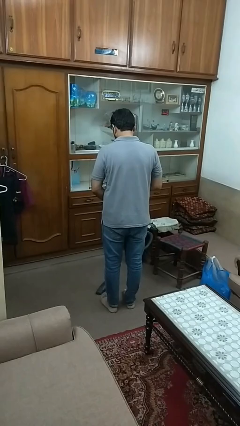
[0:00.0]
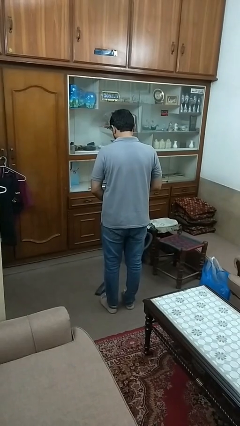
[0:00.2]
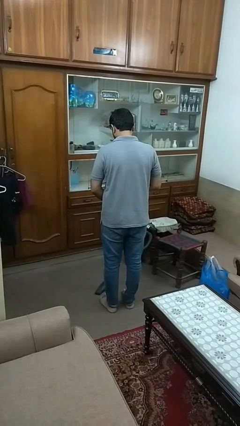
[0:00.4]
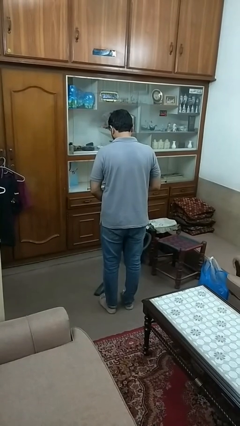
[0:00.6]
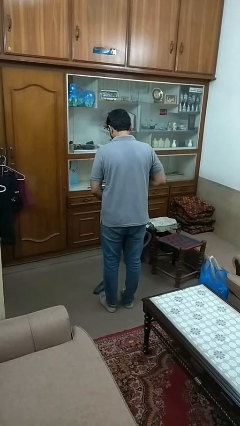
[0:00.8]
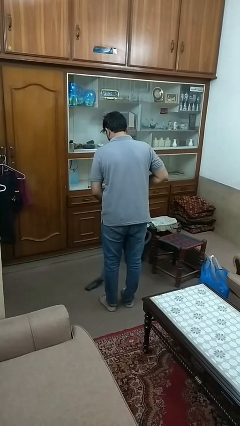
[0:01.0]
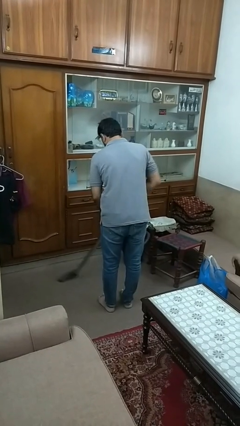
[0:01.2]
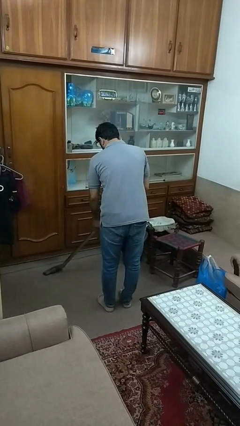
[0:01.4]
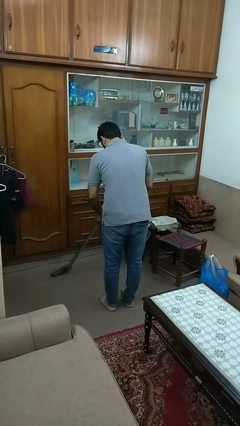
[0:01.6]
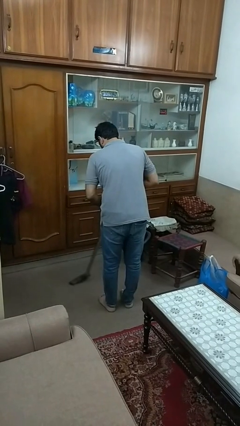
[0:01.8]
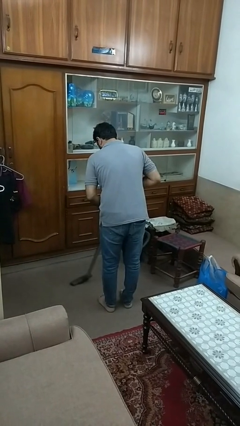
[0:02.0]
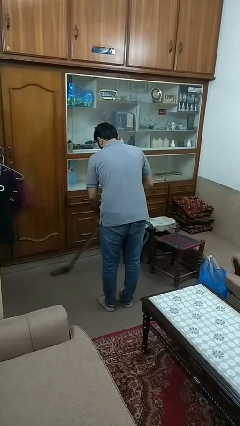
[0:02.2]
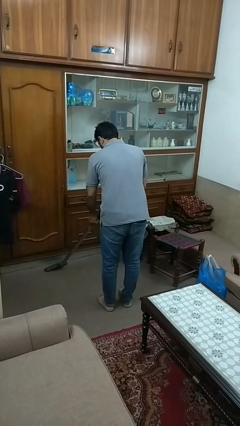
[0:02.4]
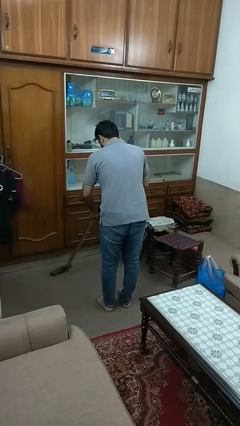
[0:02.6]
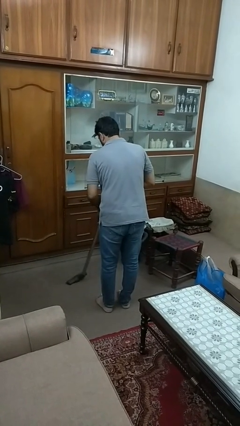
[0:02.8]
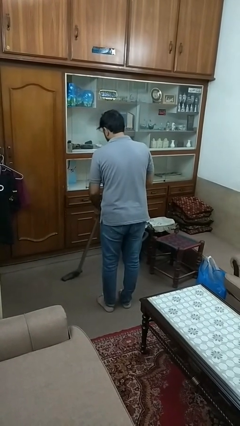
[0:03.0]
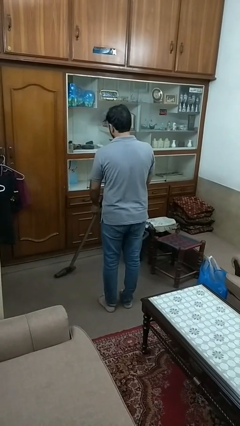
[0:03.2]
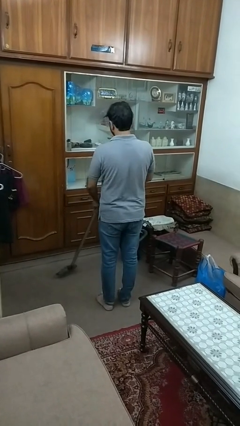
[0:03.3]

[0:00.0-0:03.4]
person vacuums carpet

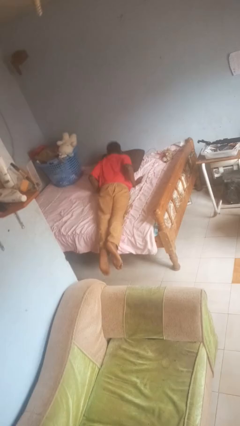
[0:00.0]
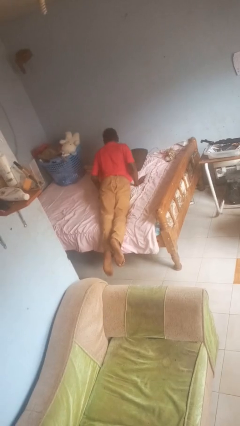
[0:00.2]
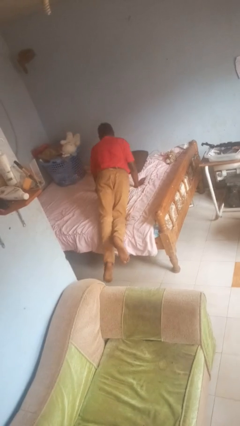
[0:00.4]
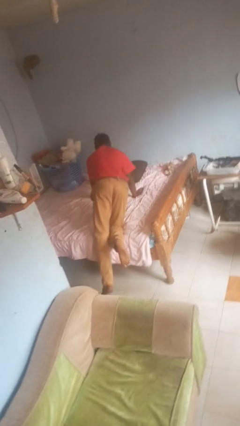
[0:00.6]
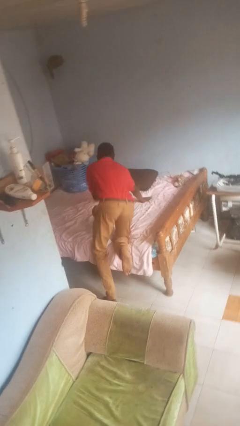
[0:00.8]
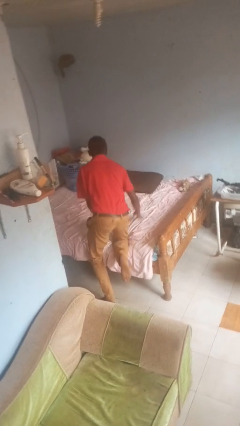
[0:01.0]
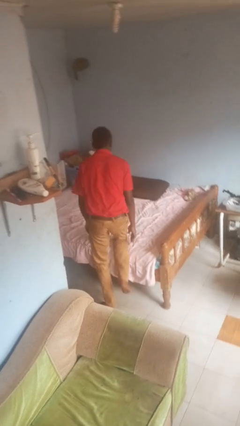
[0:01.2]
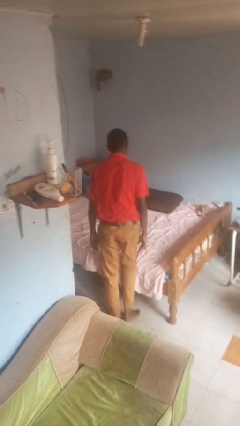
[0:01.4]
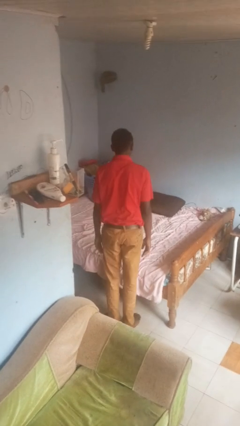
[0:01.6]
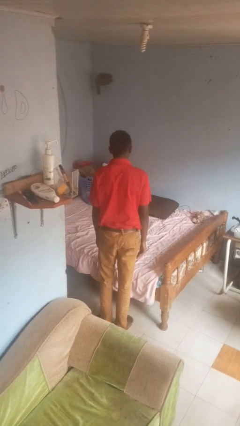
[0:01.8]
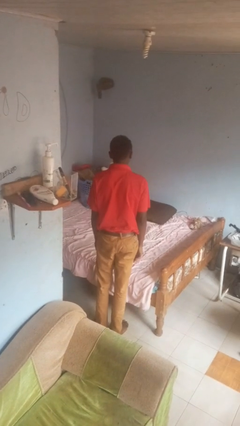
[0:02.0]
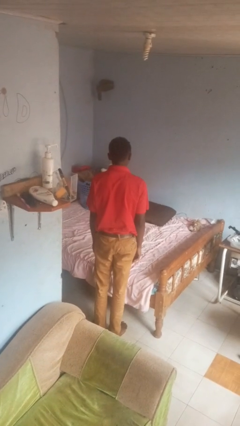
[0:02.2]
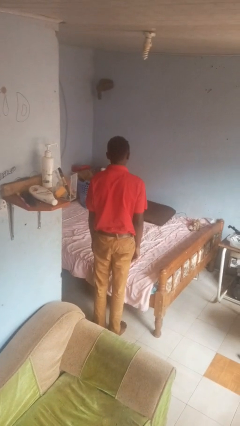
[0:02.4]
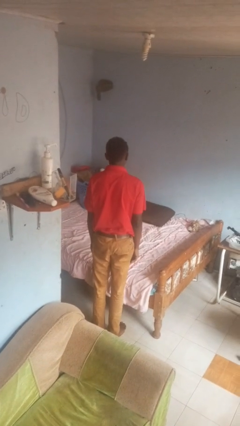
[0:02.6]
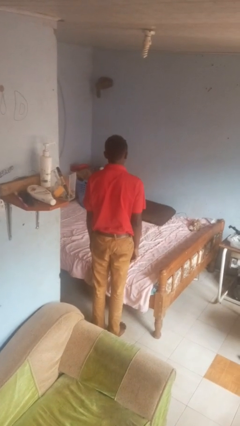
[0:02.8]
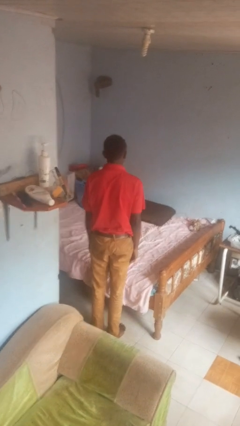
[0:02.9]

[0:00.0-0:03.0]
person stands up

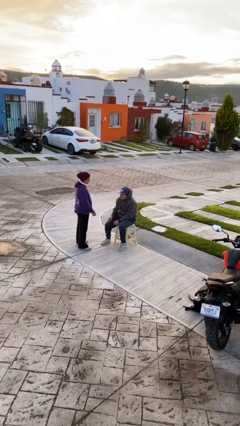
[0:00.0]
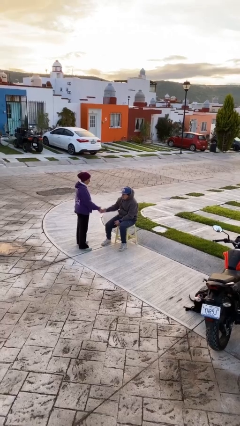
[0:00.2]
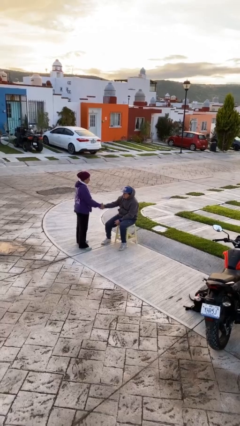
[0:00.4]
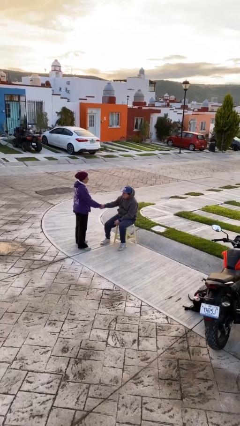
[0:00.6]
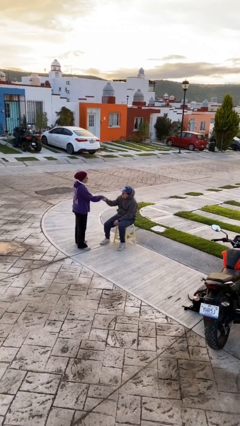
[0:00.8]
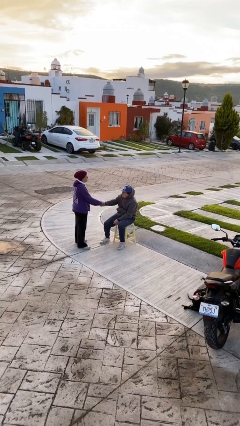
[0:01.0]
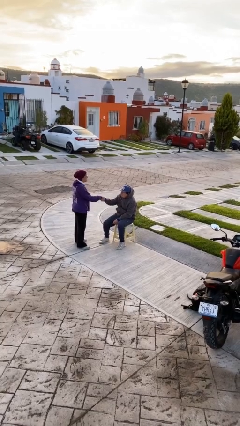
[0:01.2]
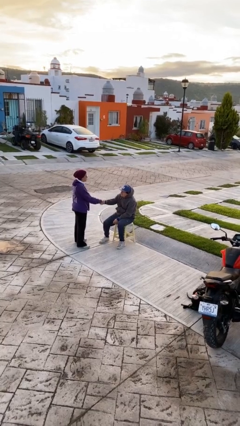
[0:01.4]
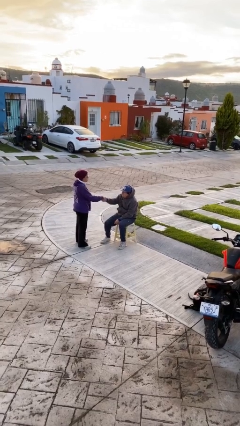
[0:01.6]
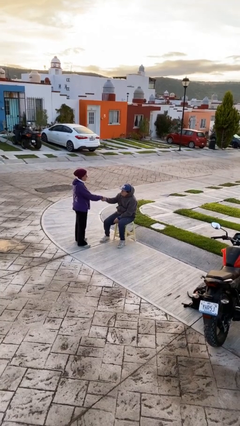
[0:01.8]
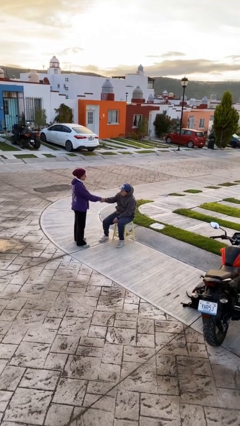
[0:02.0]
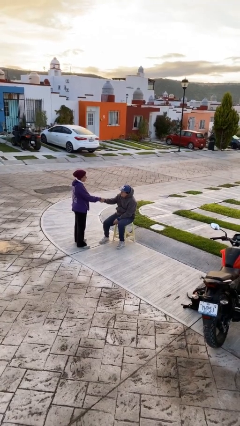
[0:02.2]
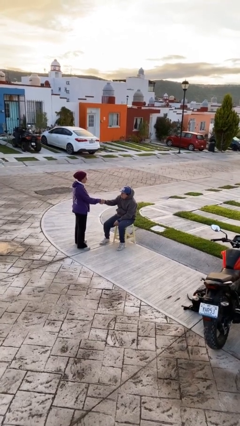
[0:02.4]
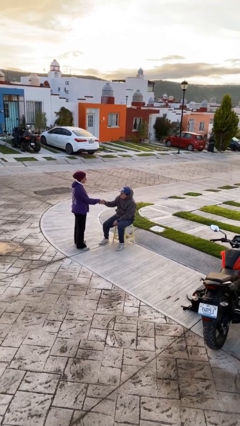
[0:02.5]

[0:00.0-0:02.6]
person shakes hand

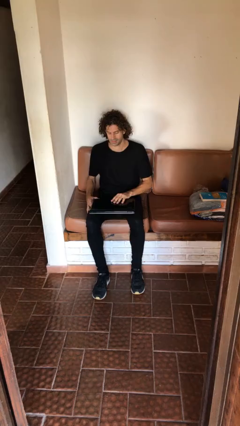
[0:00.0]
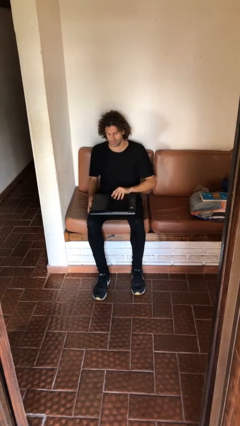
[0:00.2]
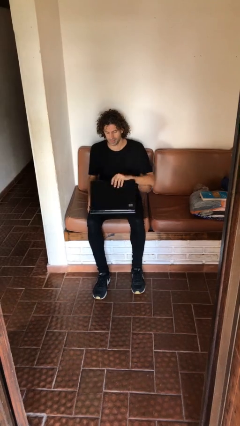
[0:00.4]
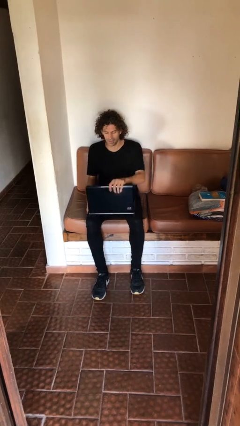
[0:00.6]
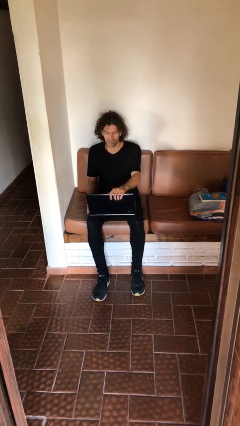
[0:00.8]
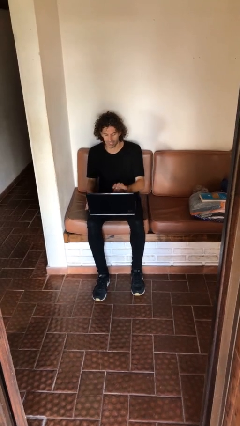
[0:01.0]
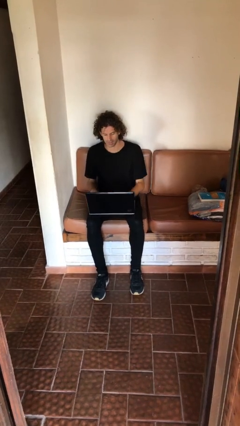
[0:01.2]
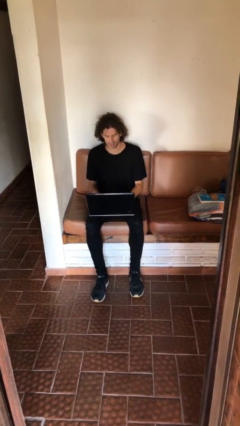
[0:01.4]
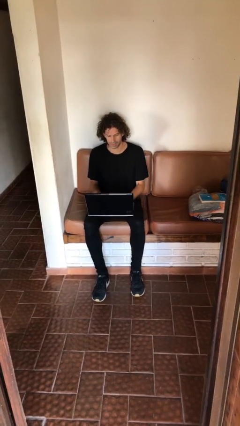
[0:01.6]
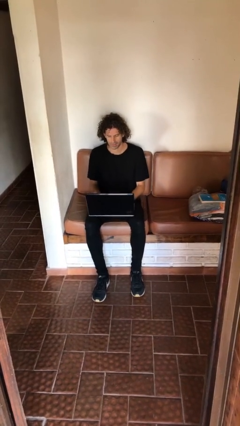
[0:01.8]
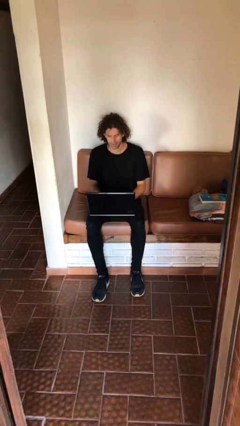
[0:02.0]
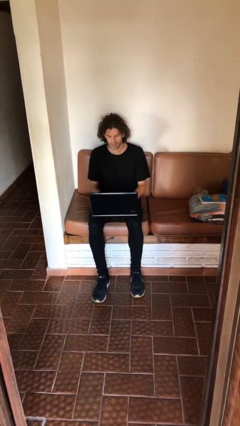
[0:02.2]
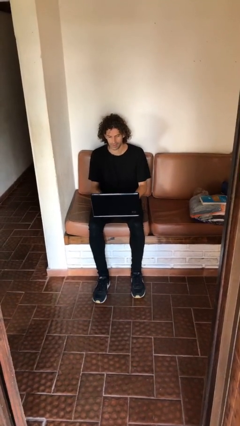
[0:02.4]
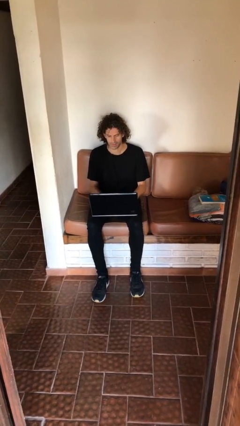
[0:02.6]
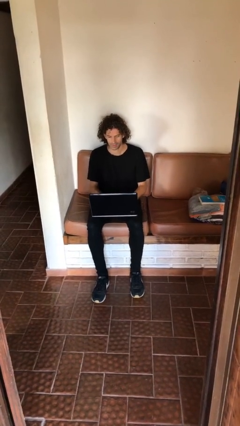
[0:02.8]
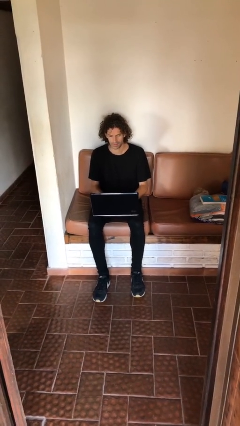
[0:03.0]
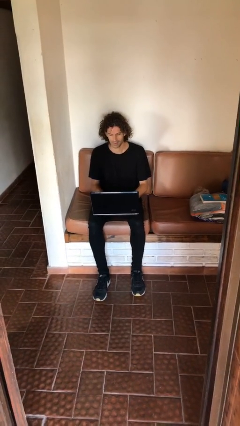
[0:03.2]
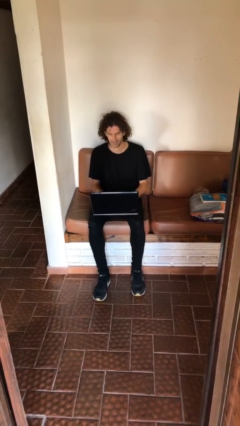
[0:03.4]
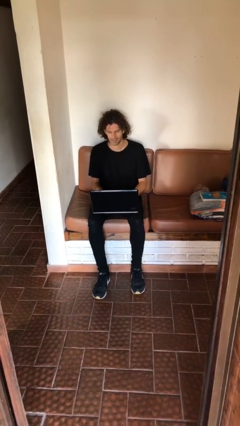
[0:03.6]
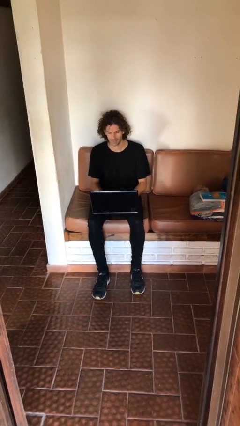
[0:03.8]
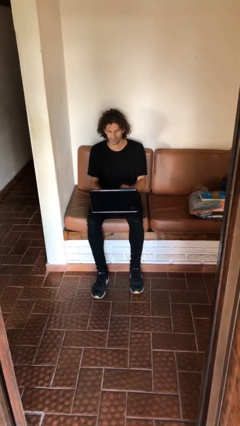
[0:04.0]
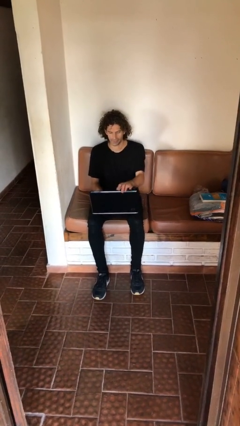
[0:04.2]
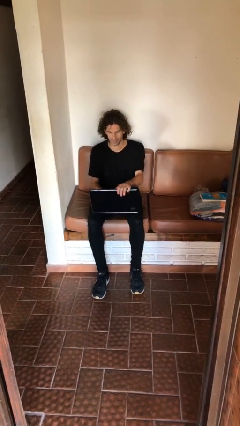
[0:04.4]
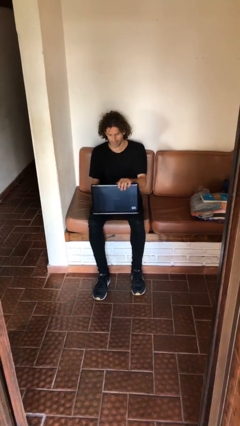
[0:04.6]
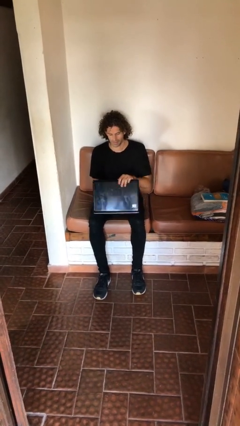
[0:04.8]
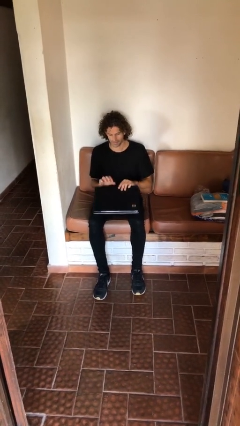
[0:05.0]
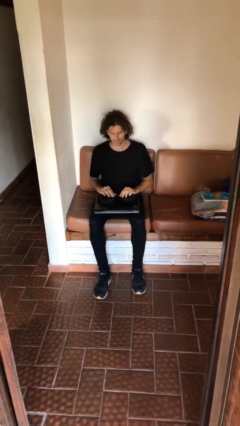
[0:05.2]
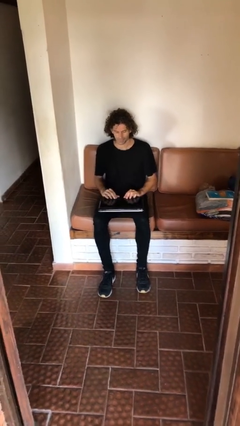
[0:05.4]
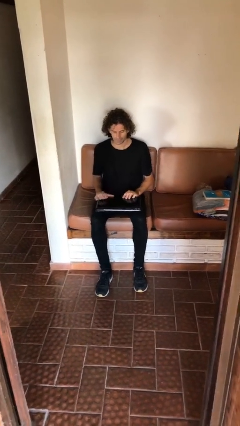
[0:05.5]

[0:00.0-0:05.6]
person interacts with laptop

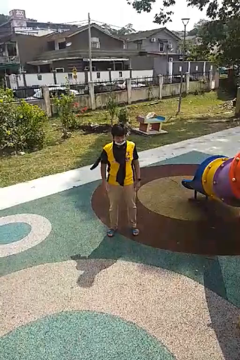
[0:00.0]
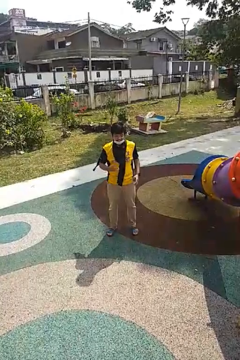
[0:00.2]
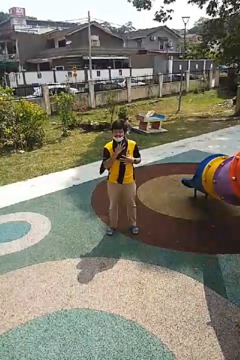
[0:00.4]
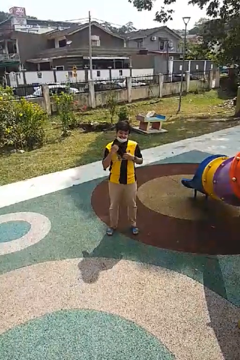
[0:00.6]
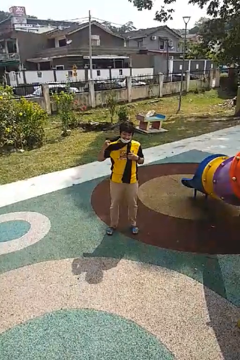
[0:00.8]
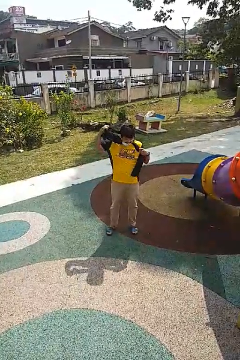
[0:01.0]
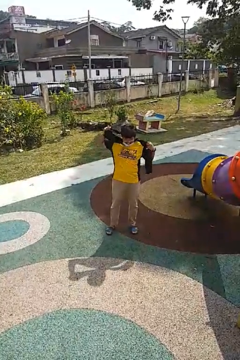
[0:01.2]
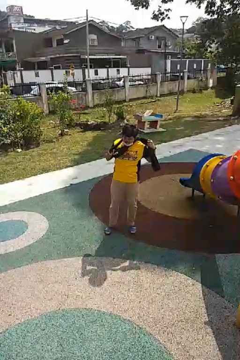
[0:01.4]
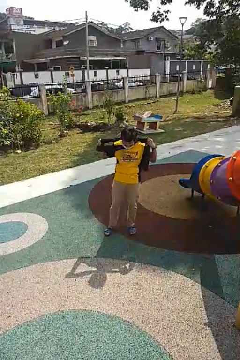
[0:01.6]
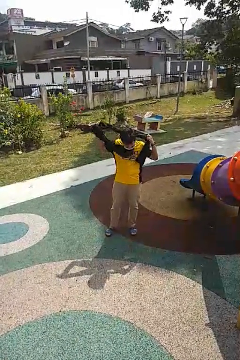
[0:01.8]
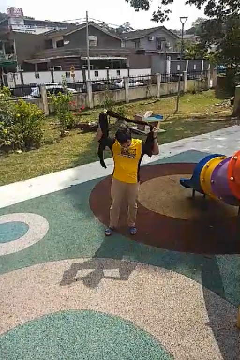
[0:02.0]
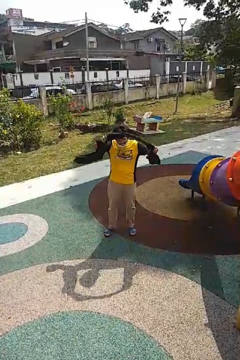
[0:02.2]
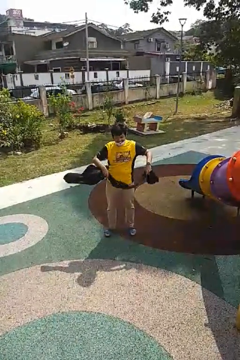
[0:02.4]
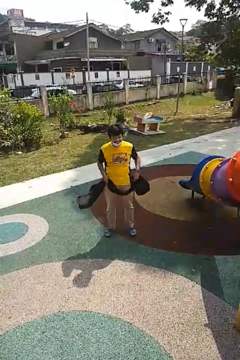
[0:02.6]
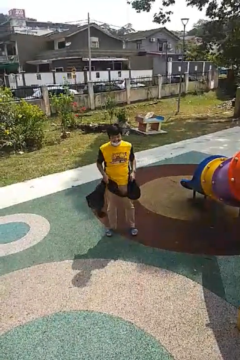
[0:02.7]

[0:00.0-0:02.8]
person takes off scarf

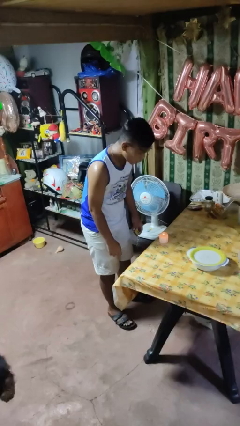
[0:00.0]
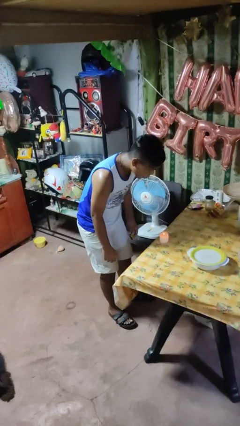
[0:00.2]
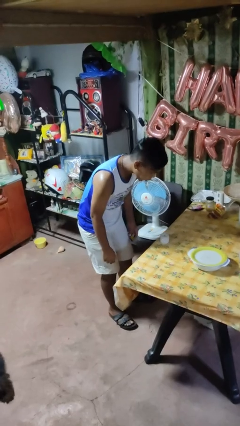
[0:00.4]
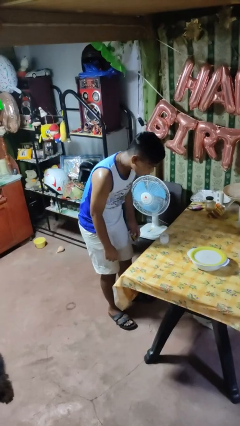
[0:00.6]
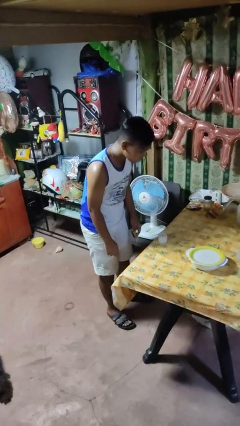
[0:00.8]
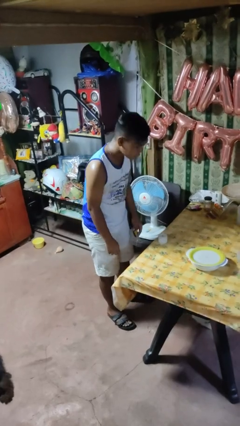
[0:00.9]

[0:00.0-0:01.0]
person extinguishes candle
